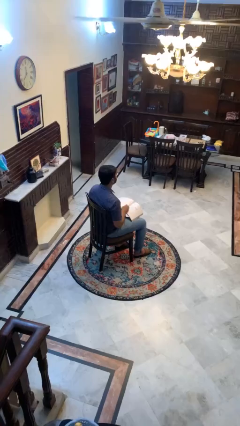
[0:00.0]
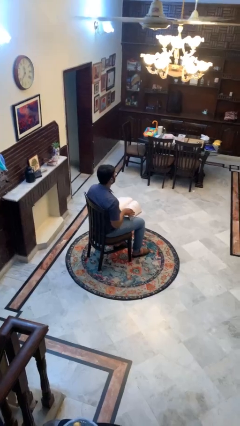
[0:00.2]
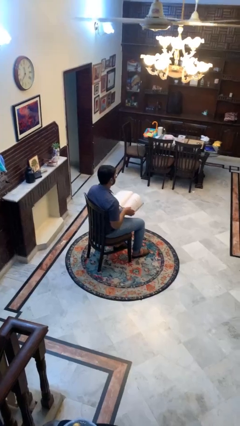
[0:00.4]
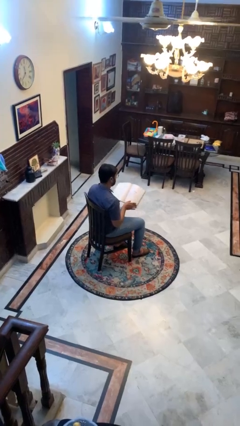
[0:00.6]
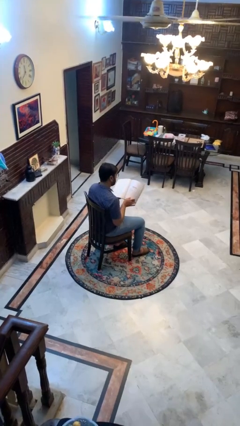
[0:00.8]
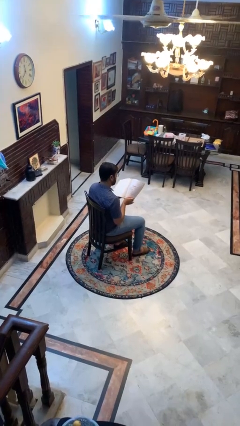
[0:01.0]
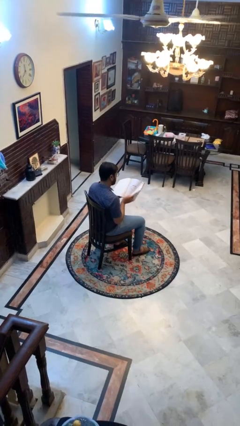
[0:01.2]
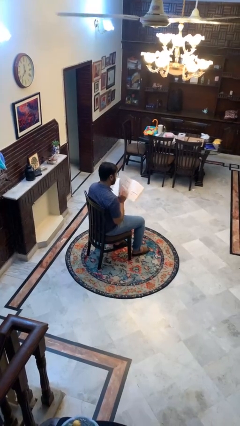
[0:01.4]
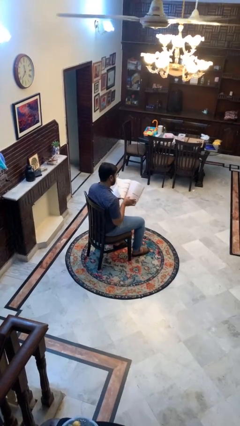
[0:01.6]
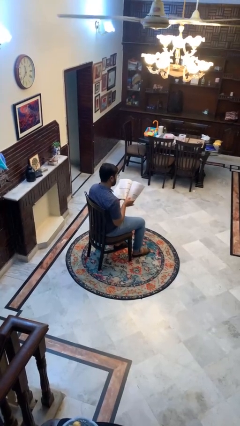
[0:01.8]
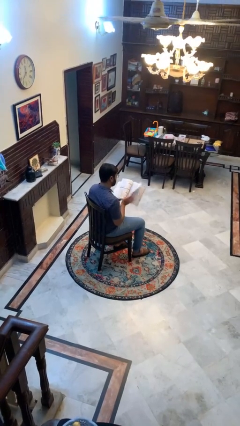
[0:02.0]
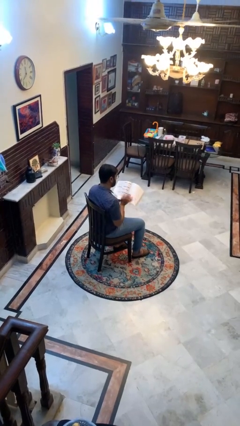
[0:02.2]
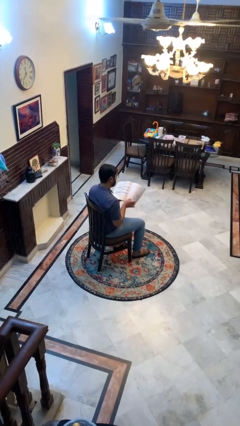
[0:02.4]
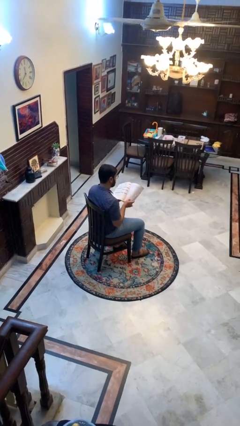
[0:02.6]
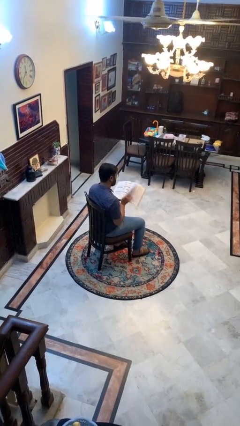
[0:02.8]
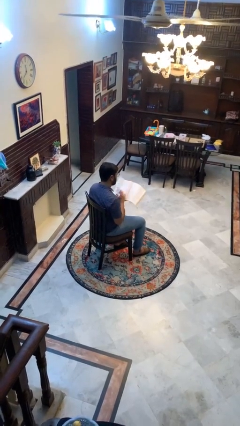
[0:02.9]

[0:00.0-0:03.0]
person reads book

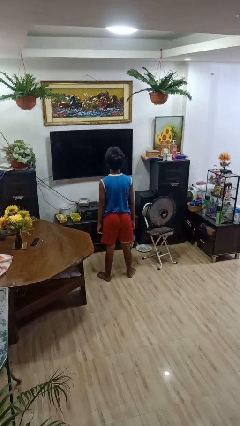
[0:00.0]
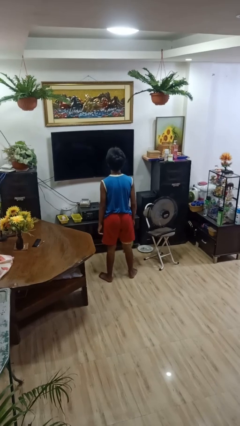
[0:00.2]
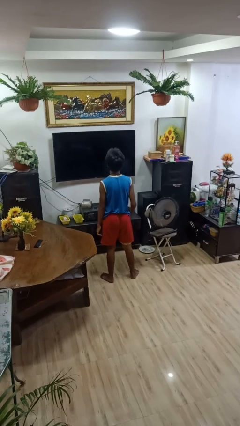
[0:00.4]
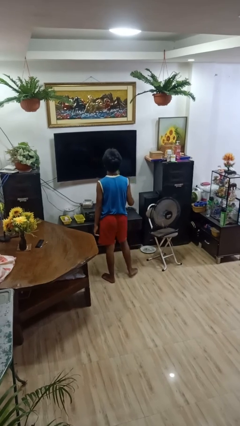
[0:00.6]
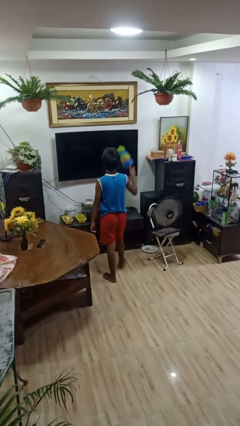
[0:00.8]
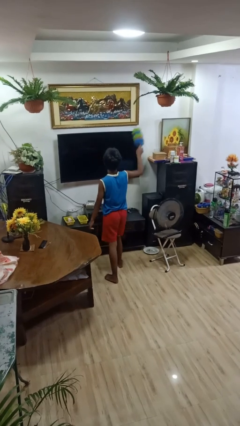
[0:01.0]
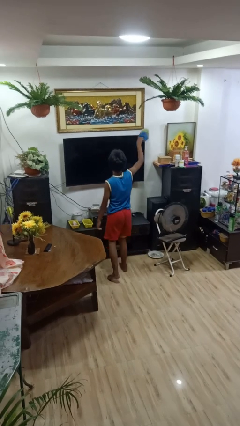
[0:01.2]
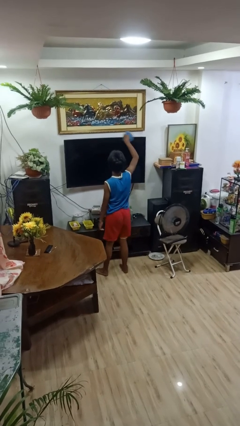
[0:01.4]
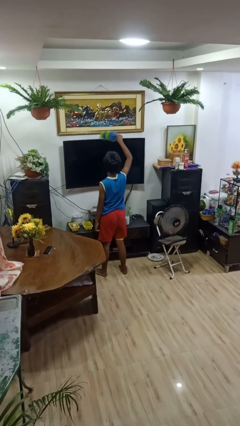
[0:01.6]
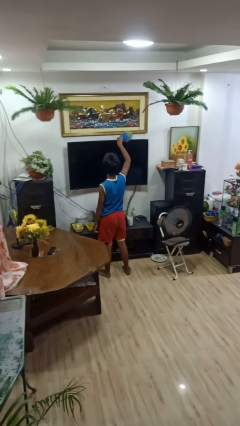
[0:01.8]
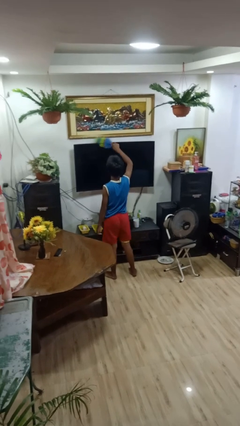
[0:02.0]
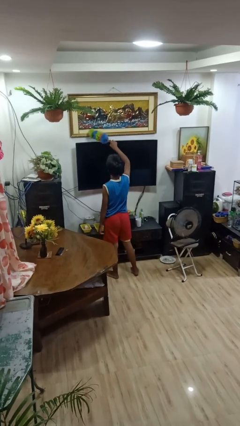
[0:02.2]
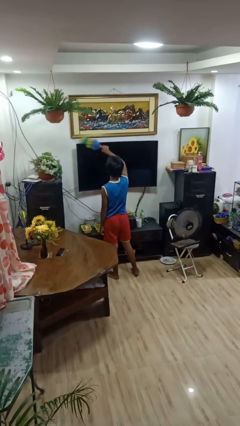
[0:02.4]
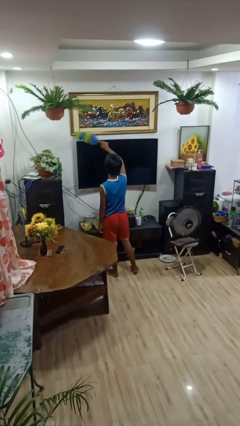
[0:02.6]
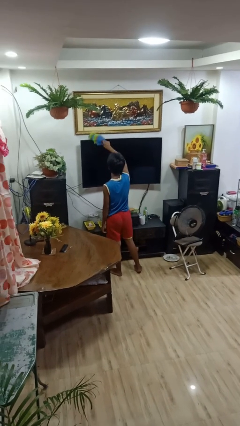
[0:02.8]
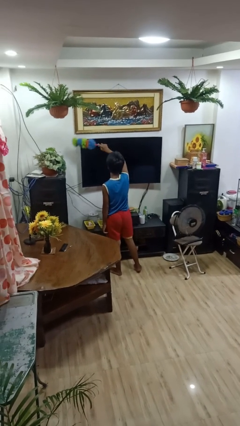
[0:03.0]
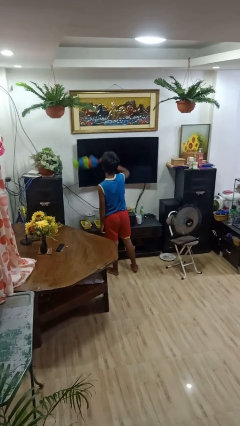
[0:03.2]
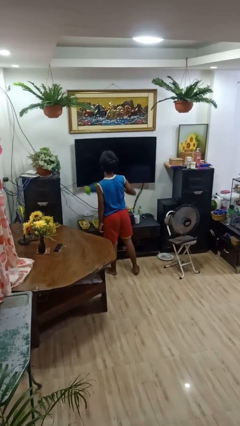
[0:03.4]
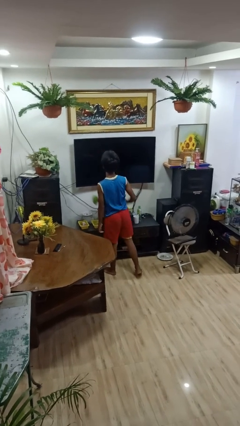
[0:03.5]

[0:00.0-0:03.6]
person dusts furniture

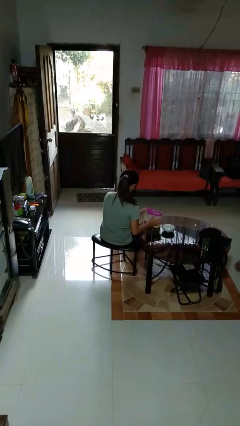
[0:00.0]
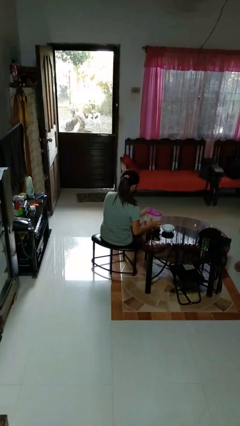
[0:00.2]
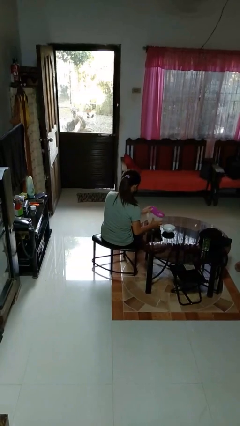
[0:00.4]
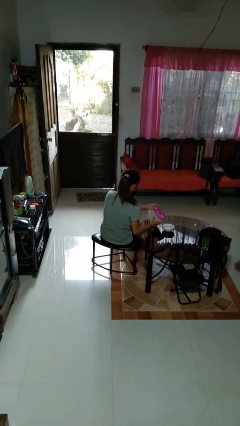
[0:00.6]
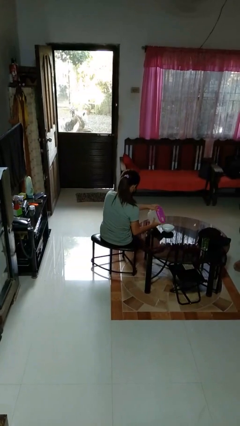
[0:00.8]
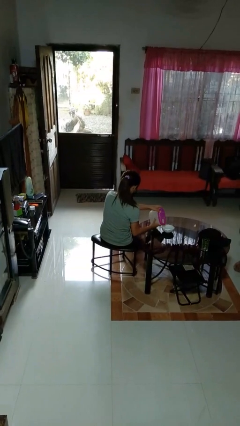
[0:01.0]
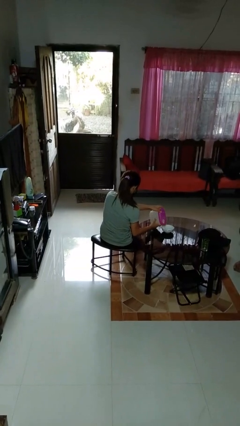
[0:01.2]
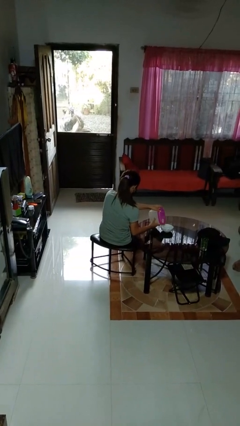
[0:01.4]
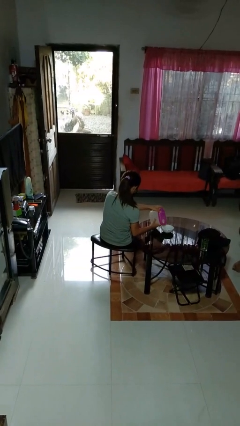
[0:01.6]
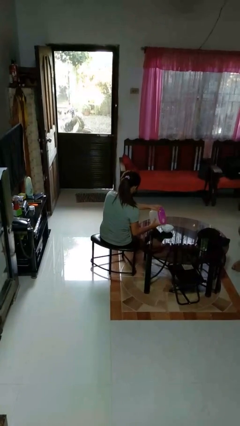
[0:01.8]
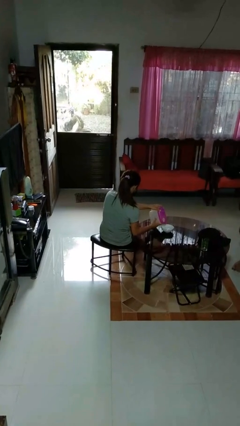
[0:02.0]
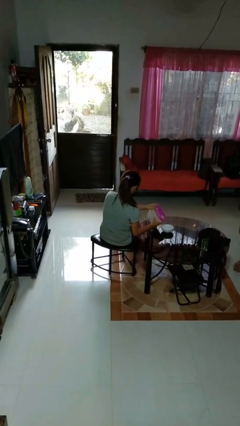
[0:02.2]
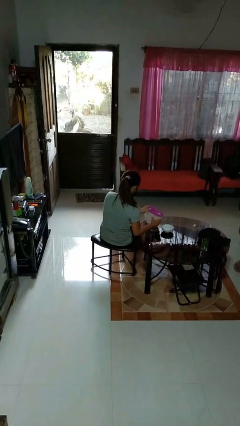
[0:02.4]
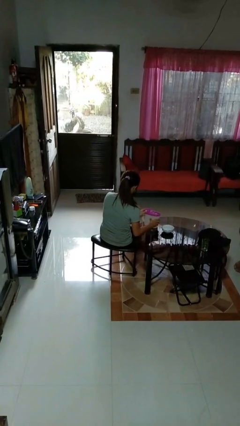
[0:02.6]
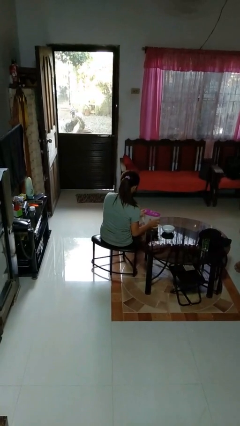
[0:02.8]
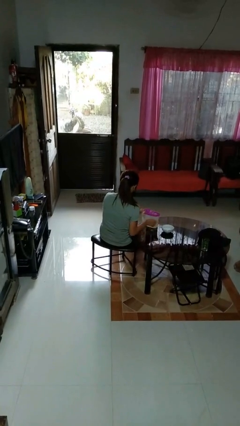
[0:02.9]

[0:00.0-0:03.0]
person pours into bowl

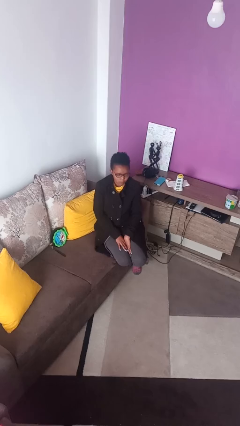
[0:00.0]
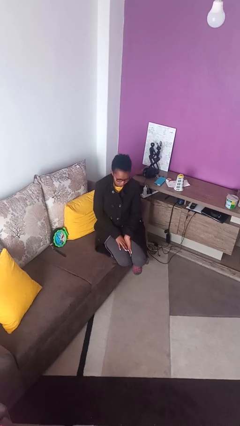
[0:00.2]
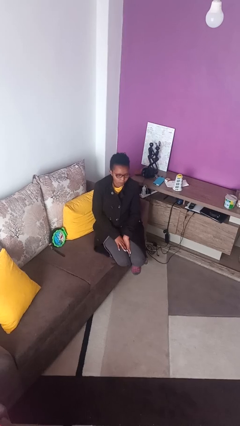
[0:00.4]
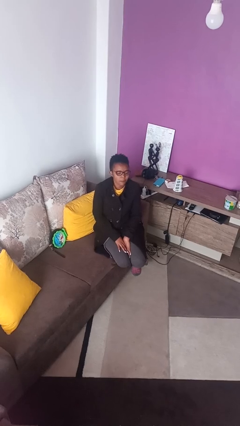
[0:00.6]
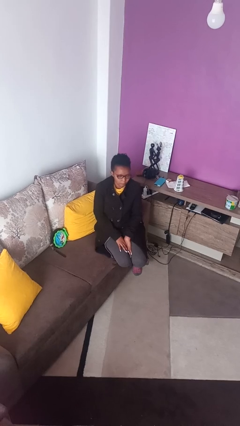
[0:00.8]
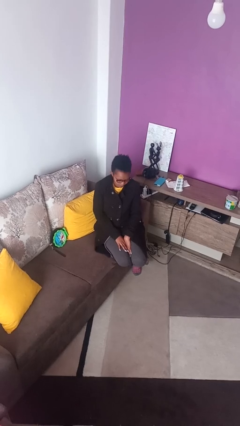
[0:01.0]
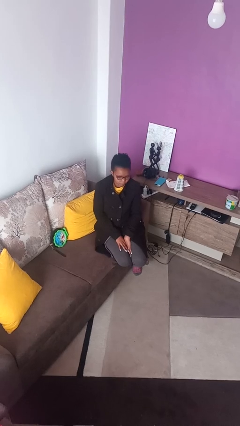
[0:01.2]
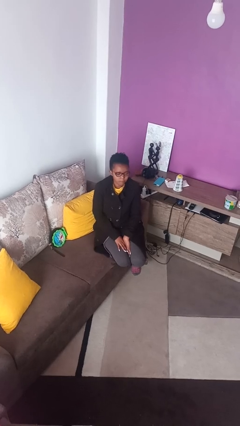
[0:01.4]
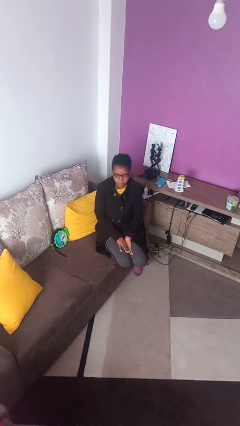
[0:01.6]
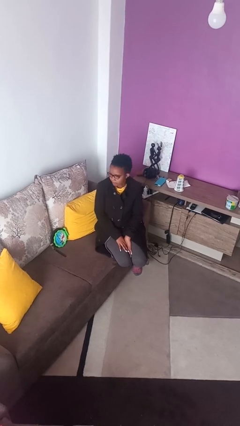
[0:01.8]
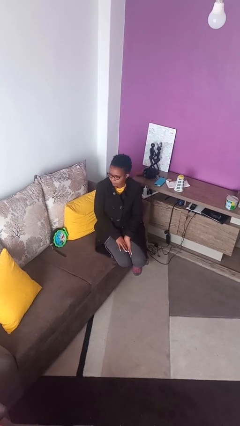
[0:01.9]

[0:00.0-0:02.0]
person nods head

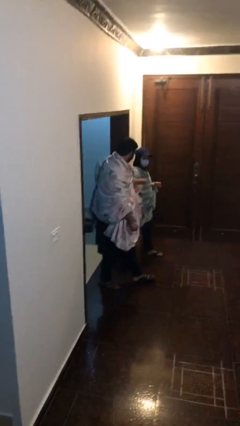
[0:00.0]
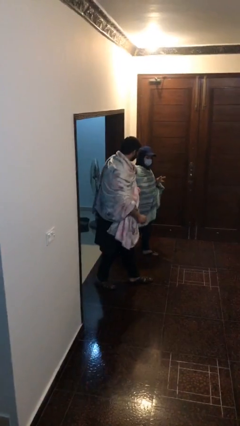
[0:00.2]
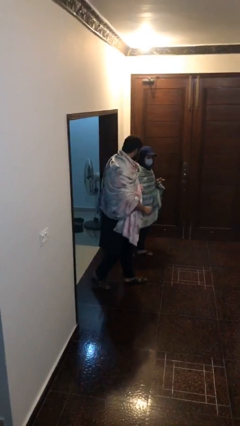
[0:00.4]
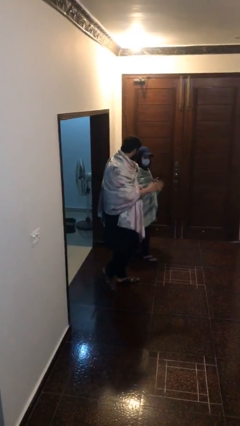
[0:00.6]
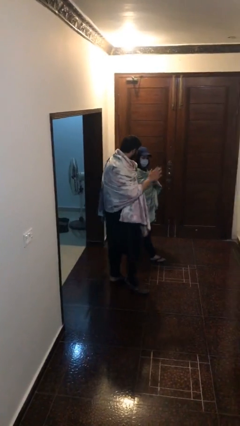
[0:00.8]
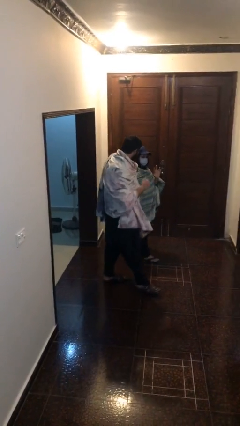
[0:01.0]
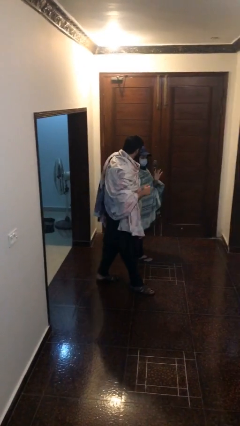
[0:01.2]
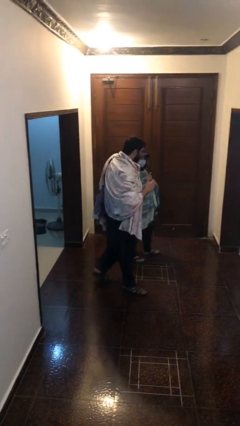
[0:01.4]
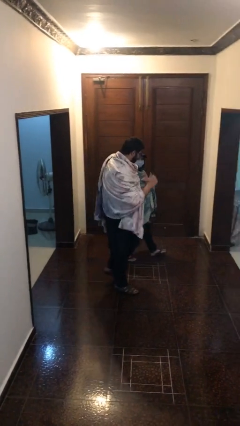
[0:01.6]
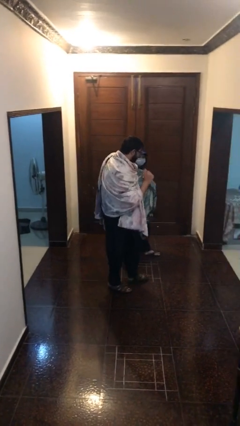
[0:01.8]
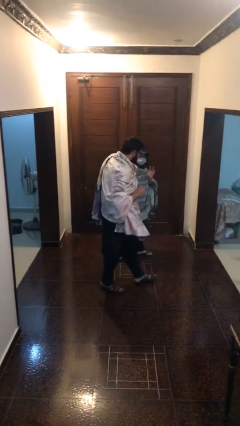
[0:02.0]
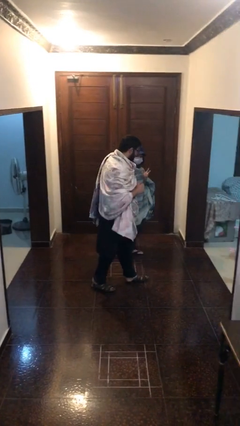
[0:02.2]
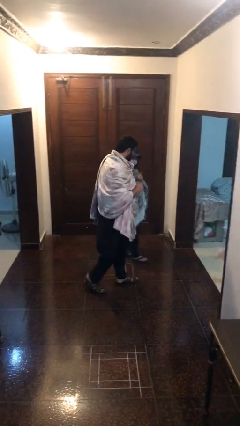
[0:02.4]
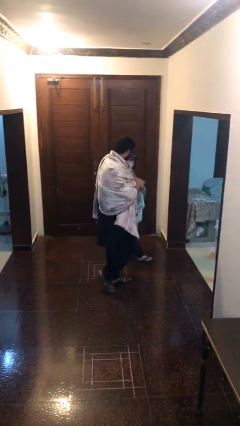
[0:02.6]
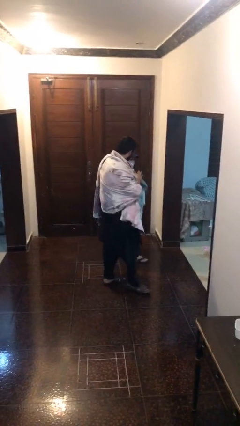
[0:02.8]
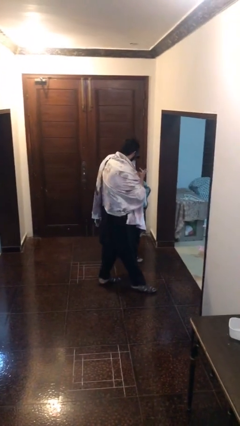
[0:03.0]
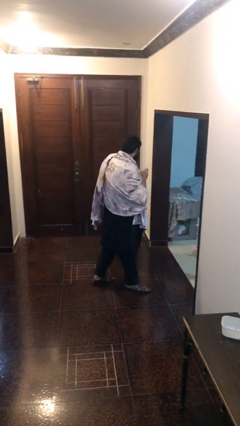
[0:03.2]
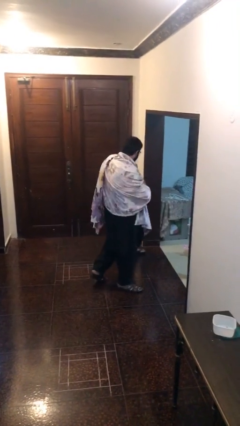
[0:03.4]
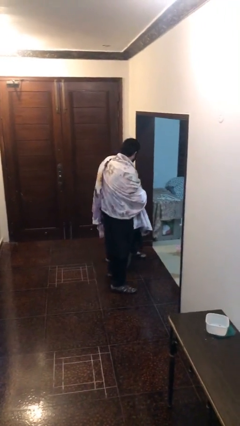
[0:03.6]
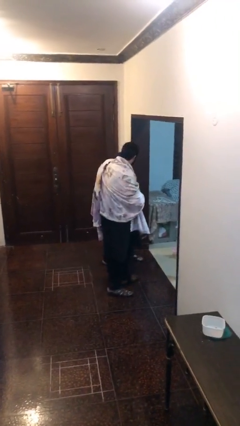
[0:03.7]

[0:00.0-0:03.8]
person talks to person

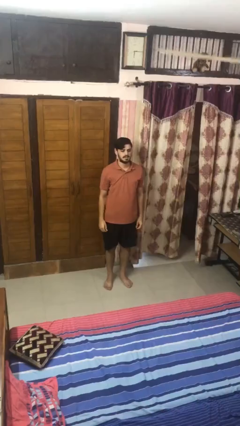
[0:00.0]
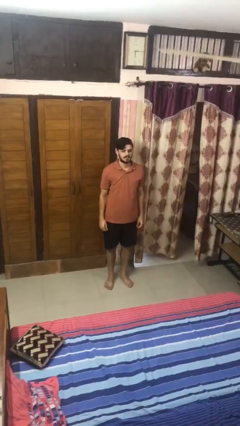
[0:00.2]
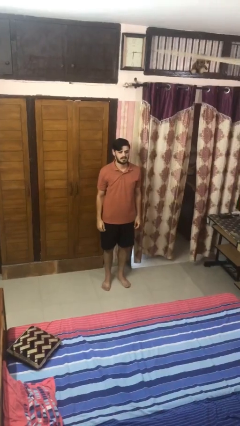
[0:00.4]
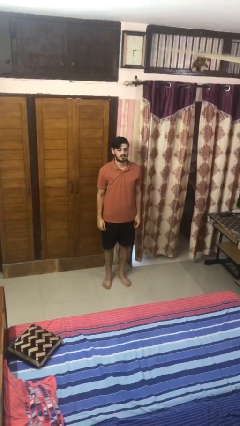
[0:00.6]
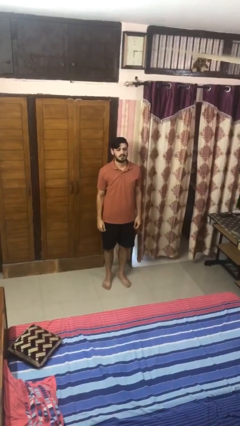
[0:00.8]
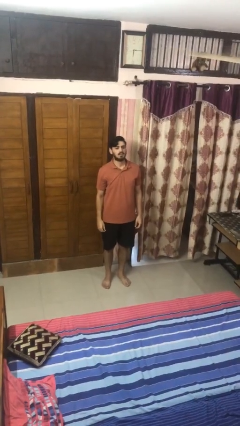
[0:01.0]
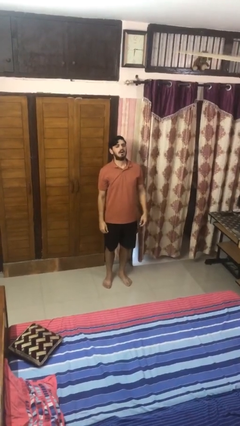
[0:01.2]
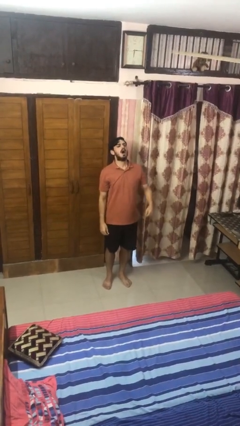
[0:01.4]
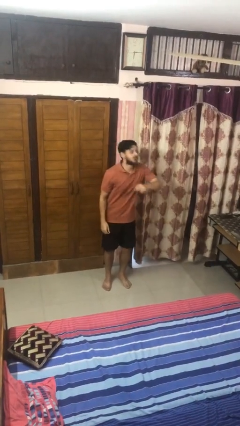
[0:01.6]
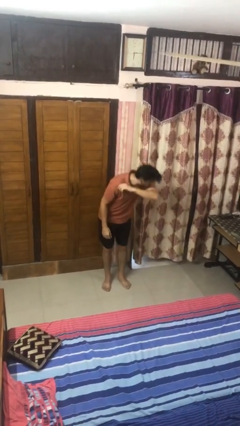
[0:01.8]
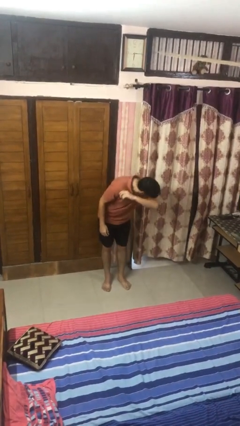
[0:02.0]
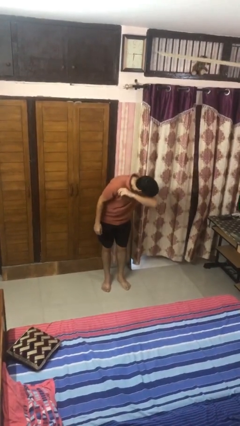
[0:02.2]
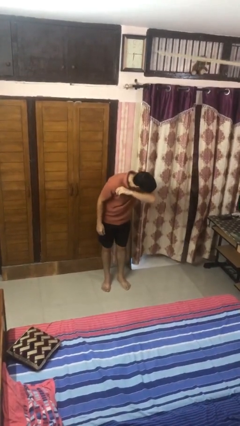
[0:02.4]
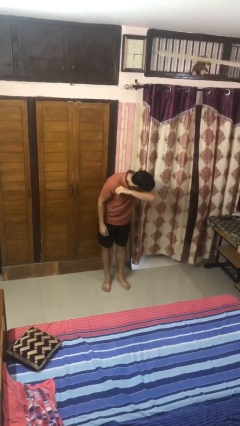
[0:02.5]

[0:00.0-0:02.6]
person sneezes into arm
